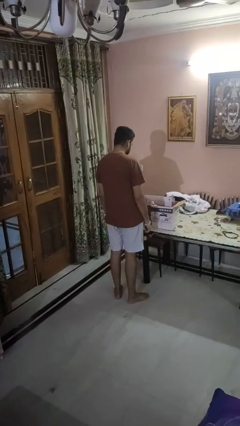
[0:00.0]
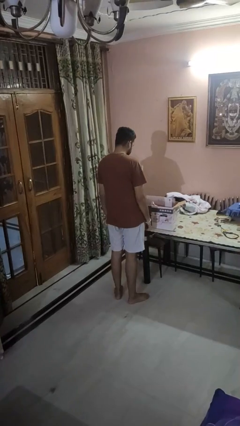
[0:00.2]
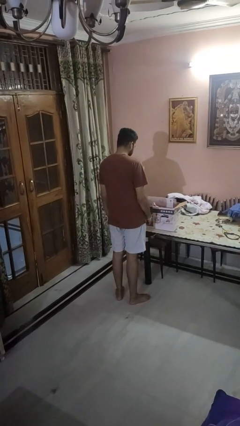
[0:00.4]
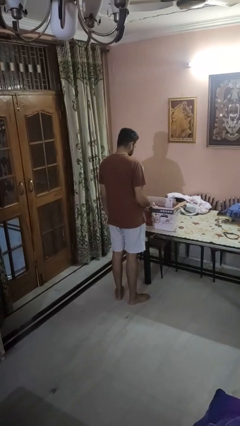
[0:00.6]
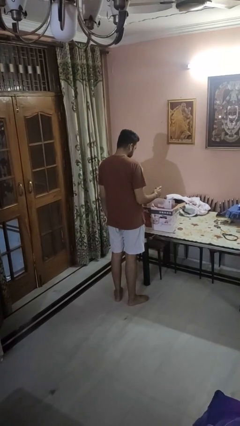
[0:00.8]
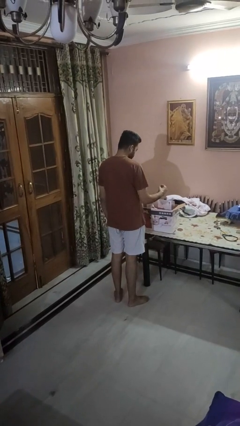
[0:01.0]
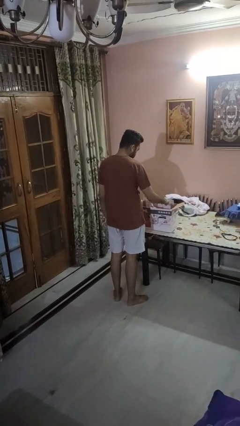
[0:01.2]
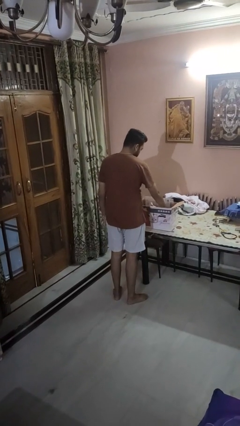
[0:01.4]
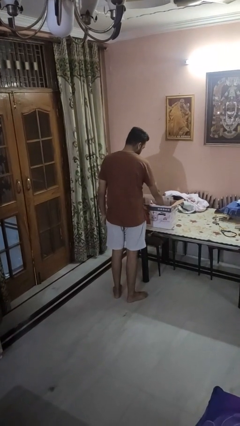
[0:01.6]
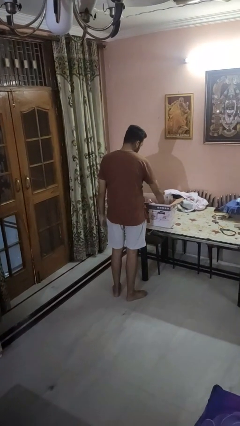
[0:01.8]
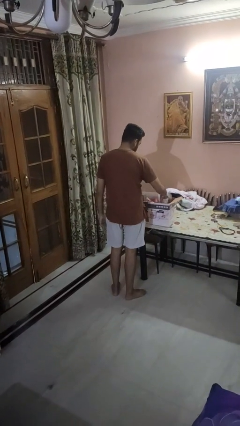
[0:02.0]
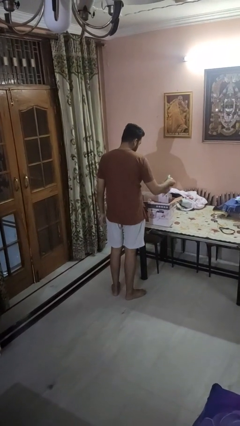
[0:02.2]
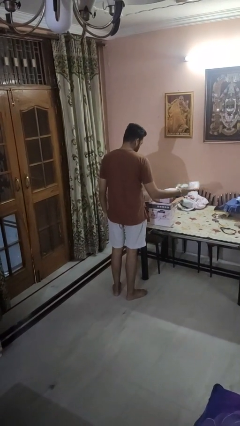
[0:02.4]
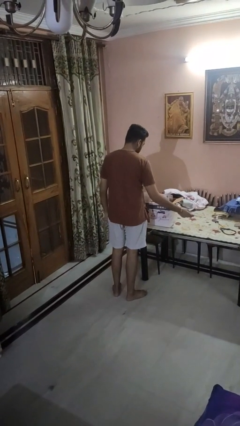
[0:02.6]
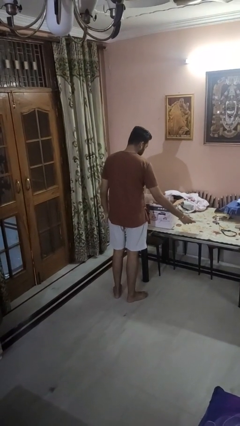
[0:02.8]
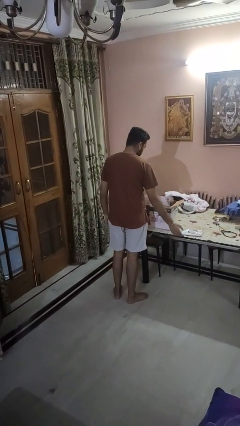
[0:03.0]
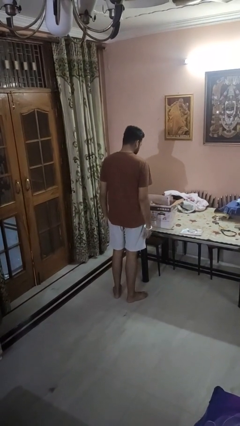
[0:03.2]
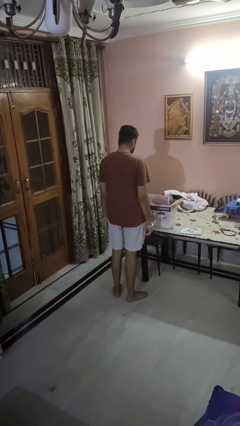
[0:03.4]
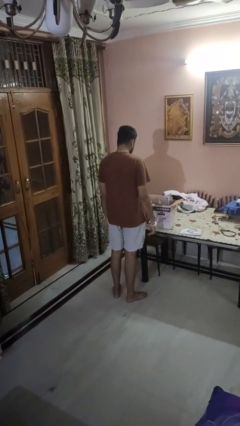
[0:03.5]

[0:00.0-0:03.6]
person takes object from box

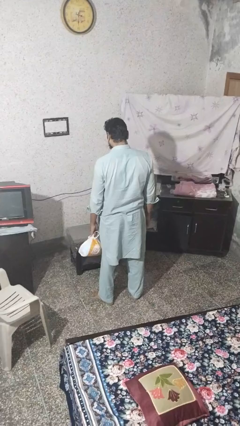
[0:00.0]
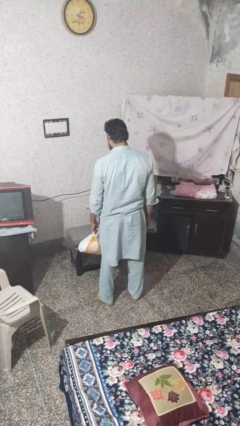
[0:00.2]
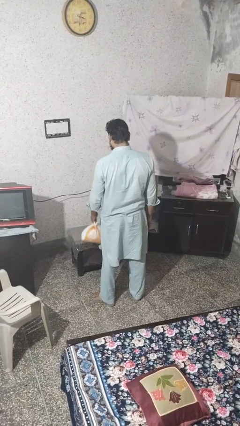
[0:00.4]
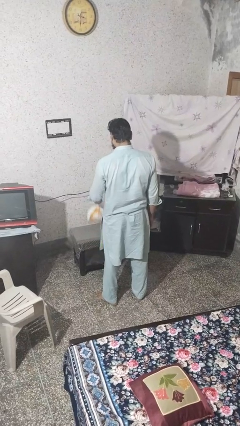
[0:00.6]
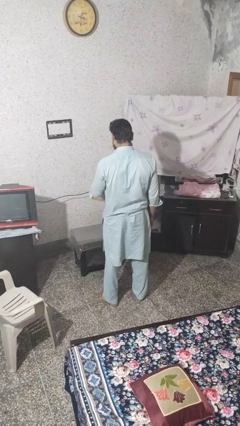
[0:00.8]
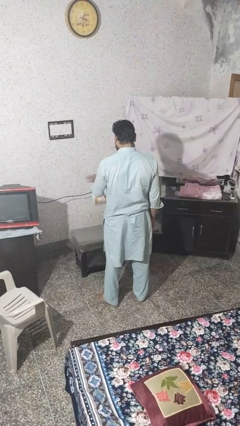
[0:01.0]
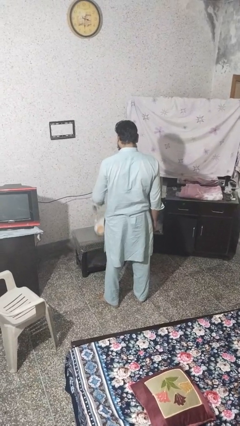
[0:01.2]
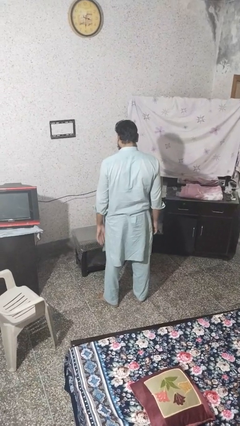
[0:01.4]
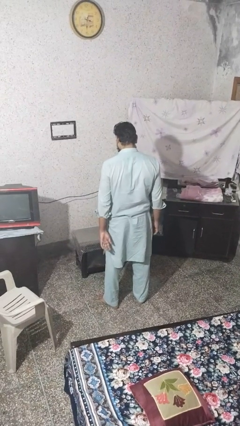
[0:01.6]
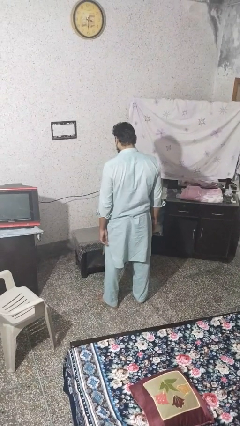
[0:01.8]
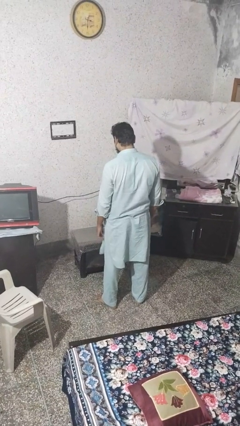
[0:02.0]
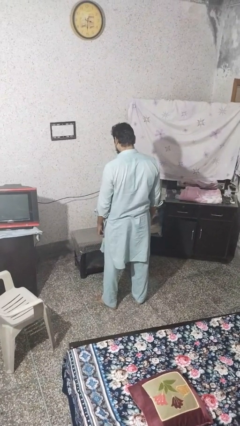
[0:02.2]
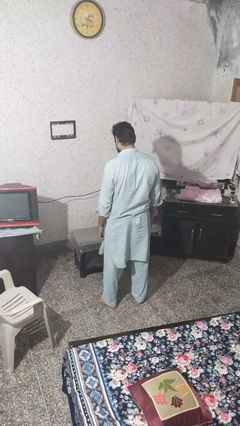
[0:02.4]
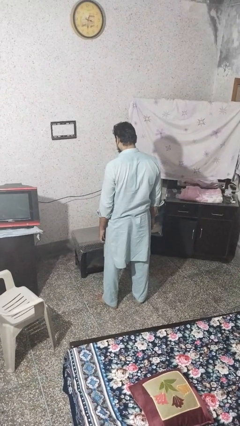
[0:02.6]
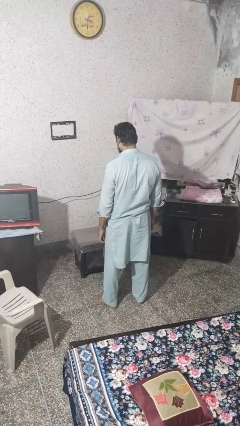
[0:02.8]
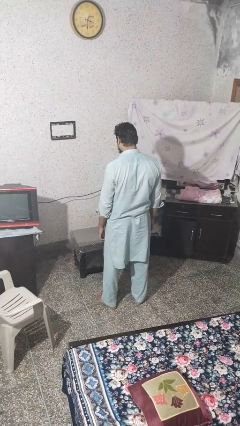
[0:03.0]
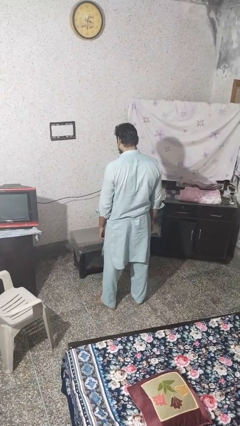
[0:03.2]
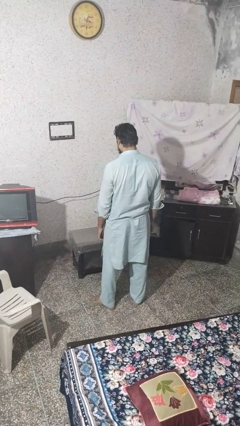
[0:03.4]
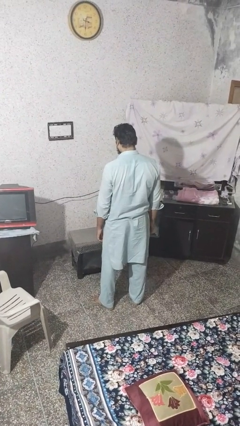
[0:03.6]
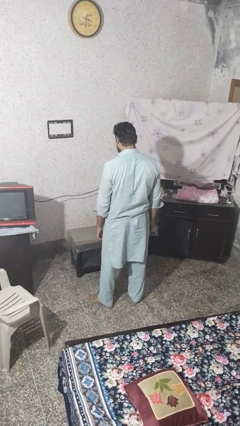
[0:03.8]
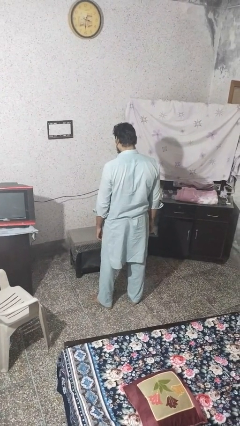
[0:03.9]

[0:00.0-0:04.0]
person throws object on table

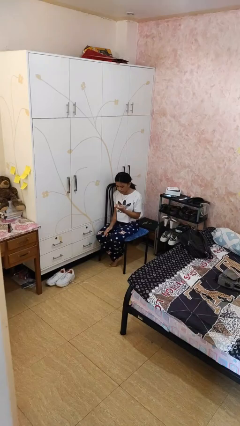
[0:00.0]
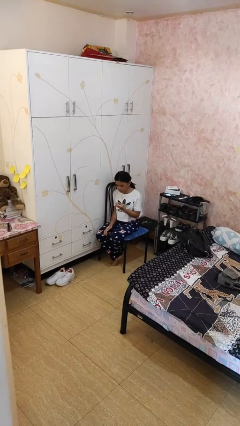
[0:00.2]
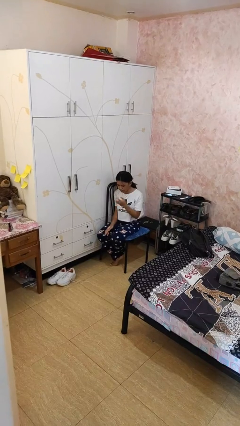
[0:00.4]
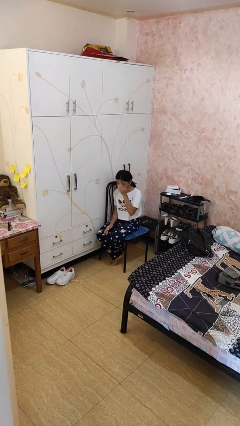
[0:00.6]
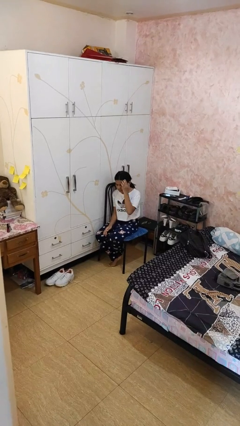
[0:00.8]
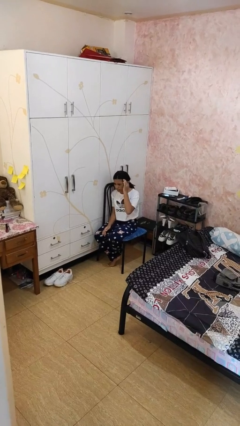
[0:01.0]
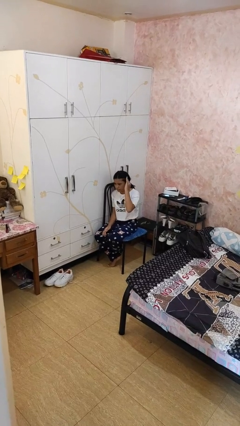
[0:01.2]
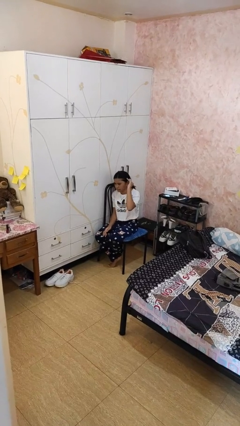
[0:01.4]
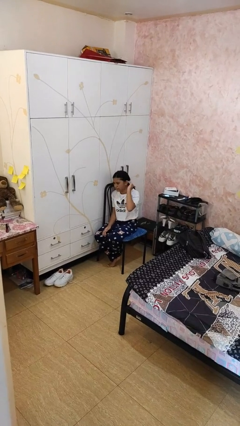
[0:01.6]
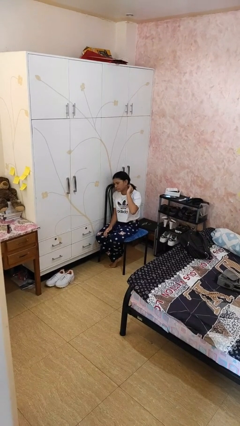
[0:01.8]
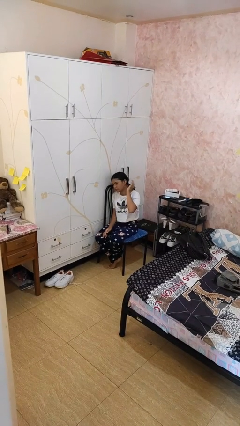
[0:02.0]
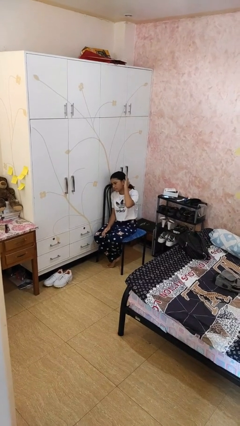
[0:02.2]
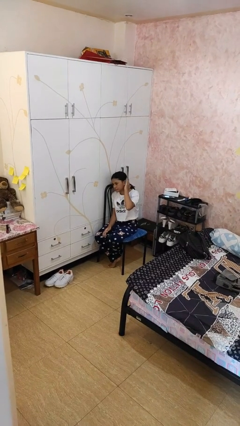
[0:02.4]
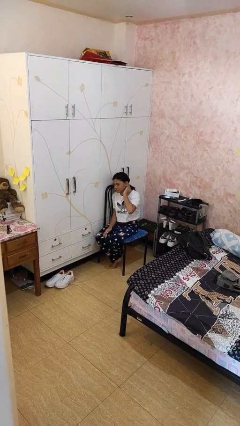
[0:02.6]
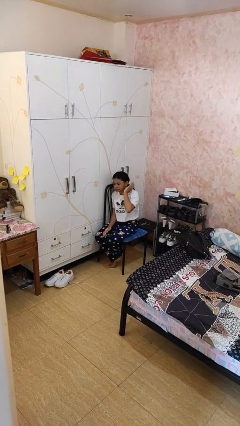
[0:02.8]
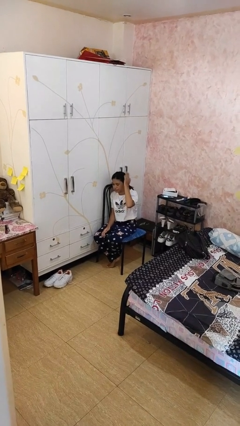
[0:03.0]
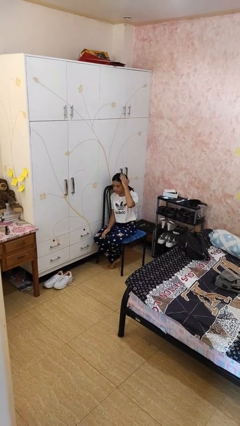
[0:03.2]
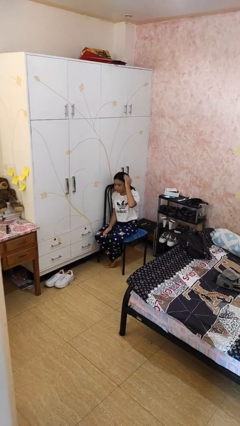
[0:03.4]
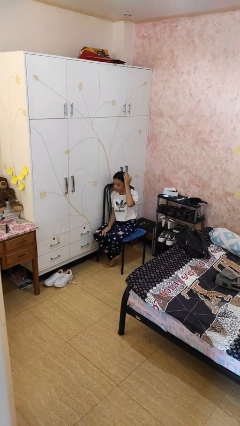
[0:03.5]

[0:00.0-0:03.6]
person pats head

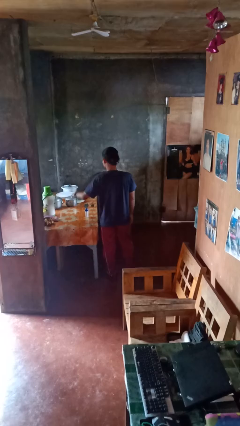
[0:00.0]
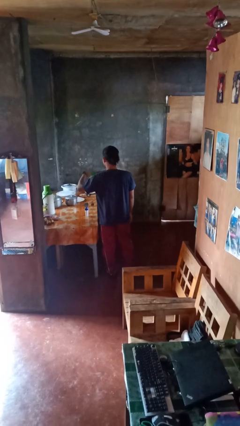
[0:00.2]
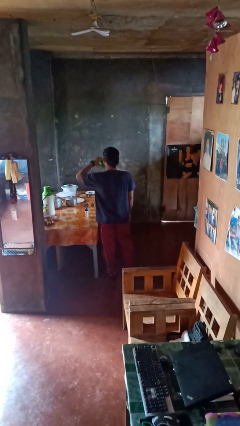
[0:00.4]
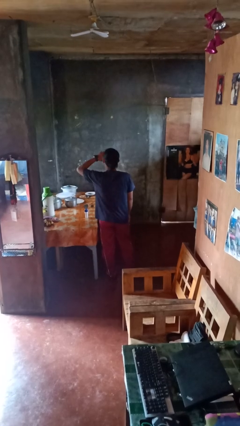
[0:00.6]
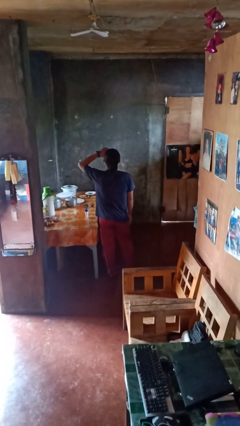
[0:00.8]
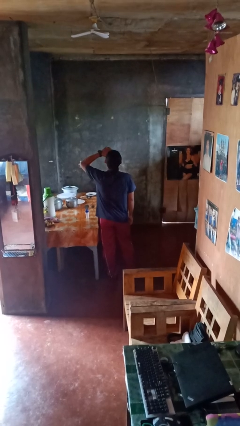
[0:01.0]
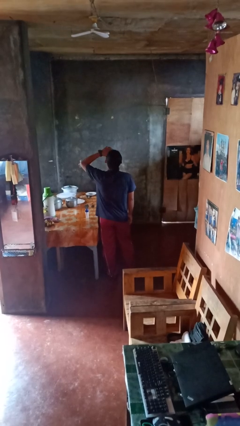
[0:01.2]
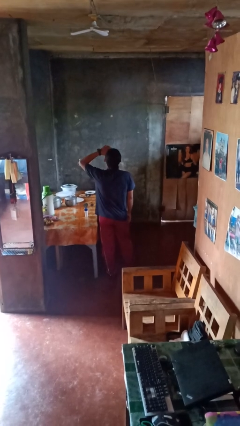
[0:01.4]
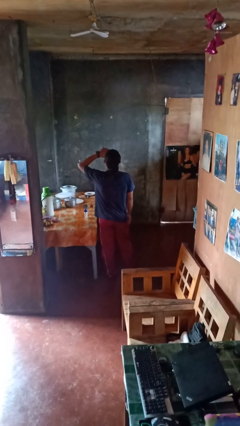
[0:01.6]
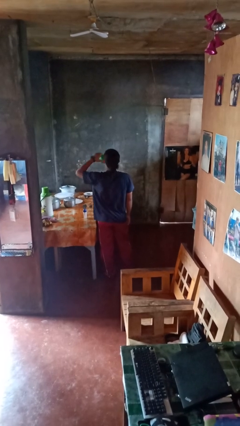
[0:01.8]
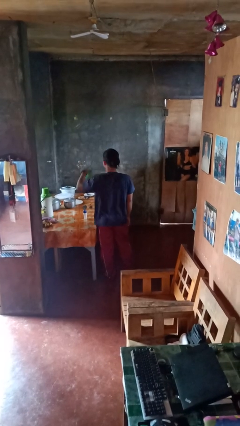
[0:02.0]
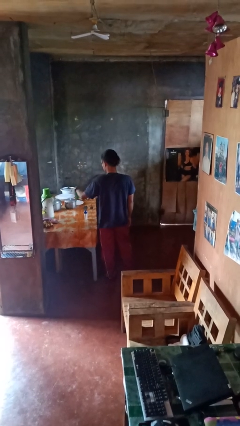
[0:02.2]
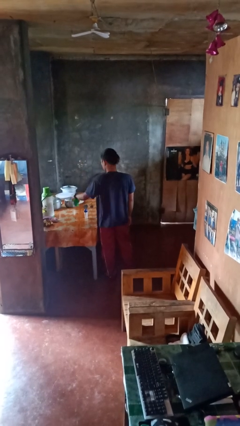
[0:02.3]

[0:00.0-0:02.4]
person drinks from cup

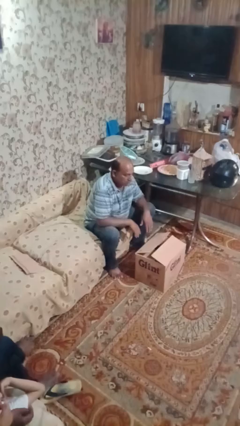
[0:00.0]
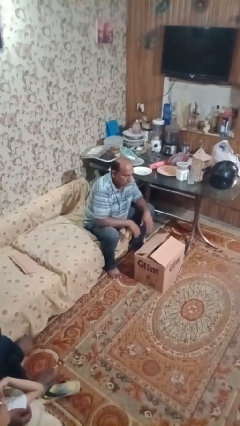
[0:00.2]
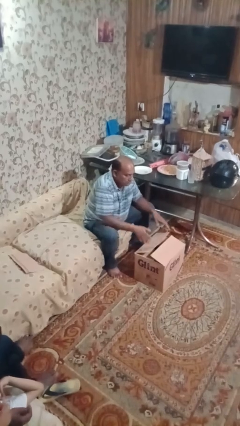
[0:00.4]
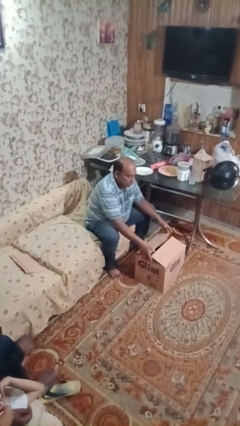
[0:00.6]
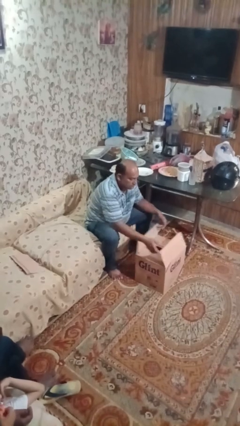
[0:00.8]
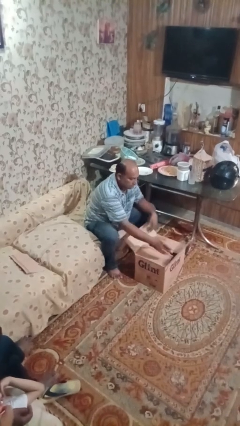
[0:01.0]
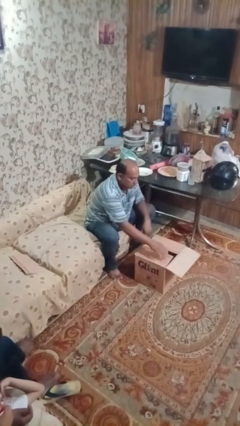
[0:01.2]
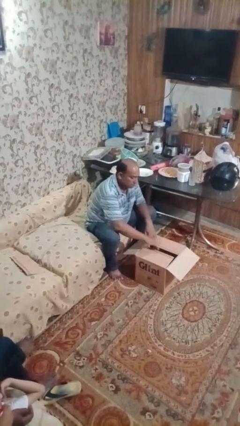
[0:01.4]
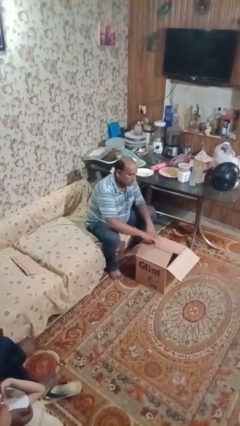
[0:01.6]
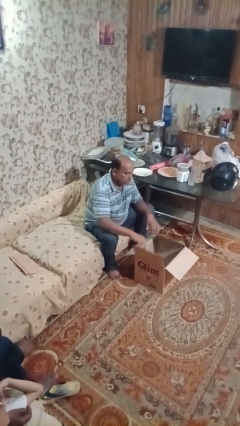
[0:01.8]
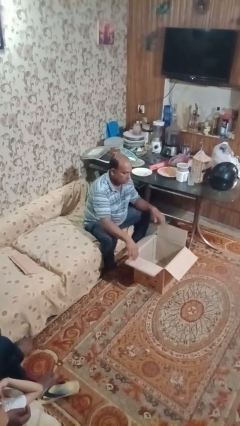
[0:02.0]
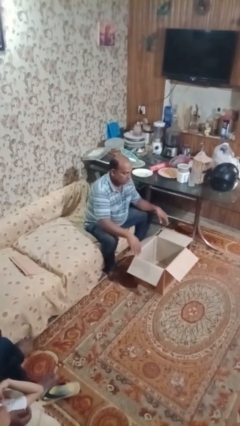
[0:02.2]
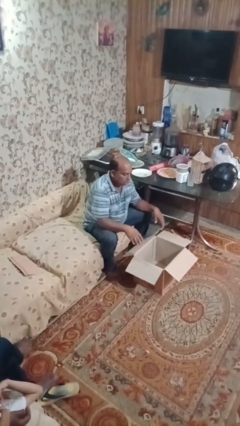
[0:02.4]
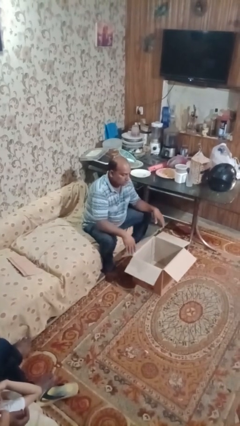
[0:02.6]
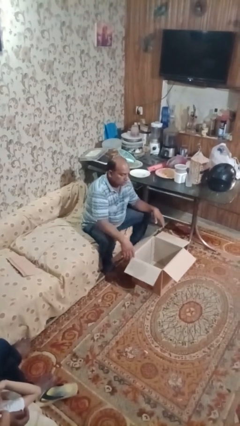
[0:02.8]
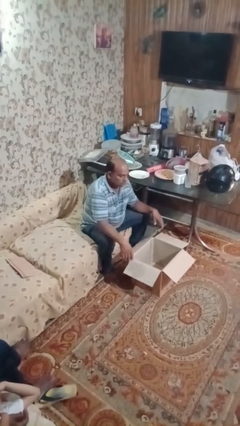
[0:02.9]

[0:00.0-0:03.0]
person opens box

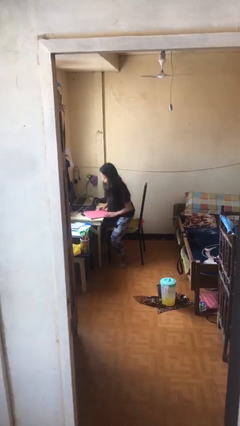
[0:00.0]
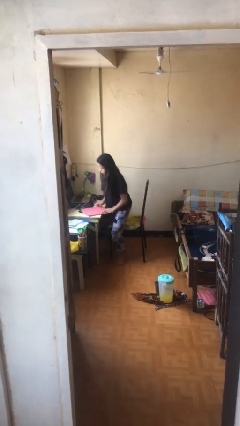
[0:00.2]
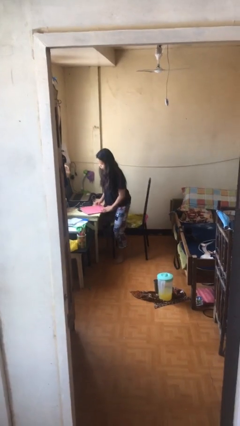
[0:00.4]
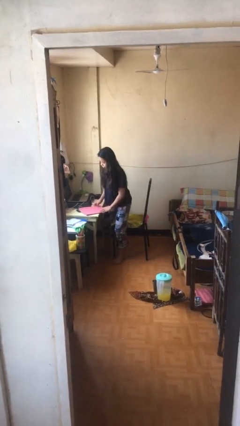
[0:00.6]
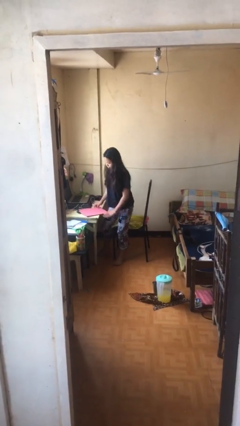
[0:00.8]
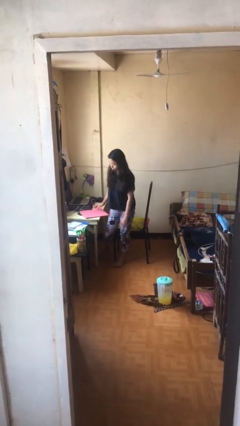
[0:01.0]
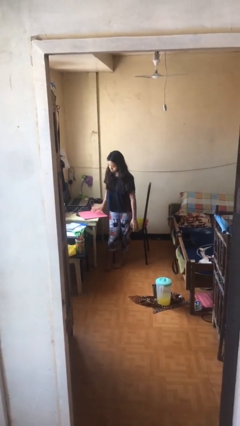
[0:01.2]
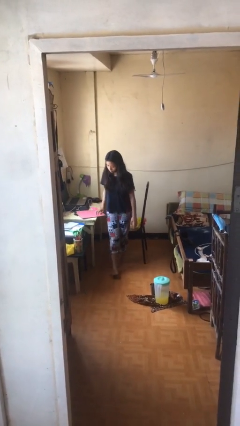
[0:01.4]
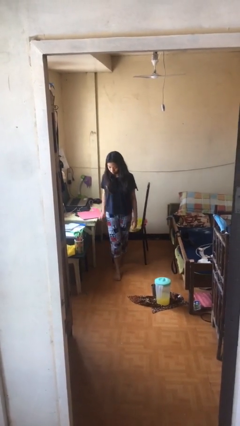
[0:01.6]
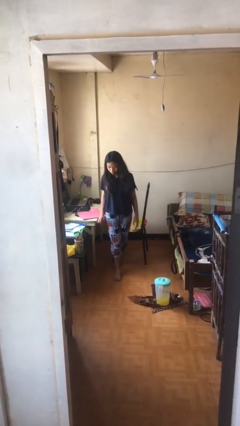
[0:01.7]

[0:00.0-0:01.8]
person stands up
